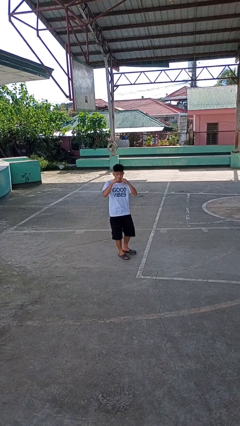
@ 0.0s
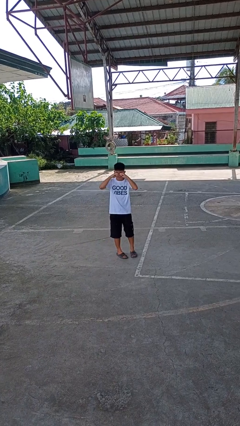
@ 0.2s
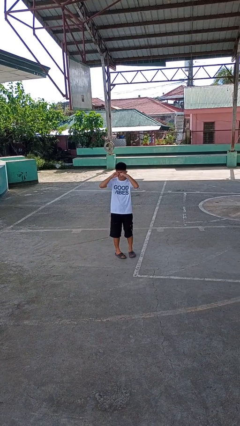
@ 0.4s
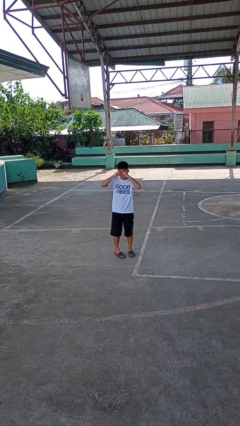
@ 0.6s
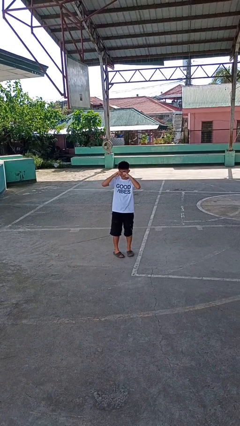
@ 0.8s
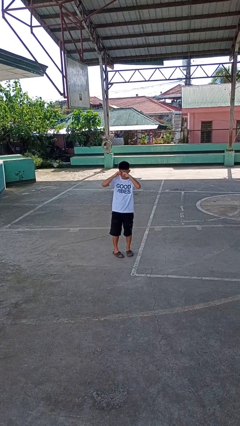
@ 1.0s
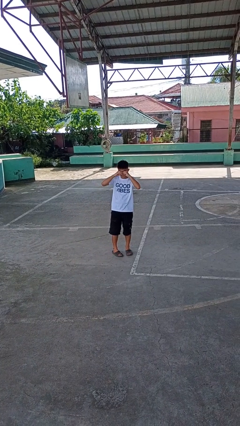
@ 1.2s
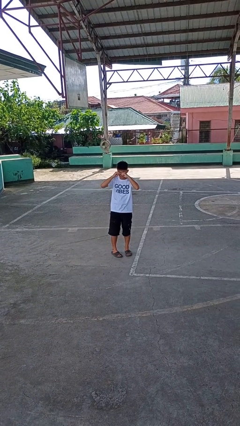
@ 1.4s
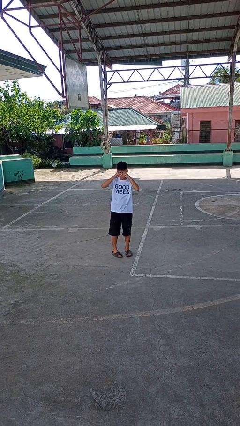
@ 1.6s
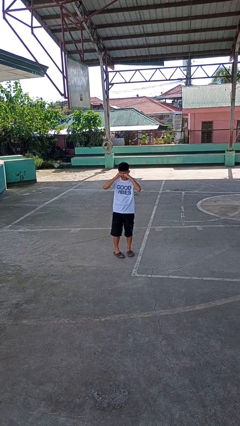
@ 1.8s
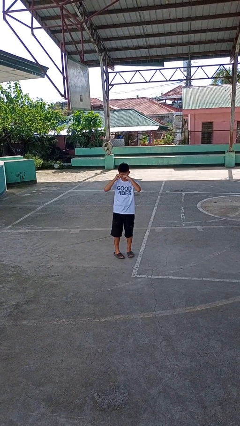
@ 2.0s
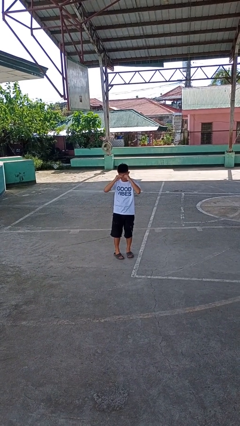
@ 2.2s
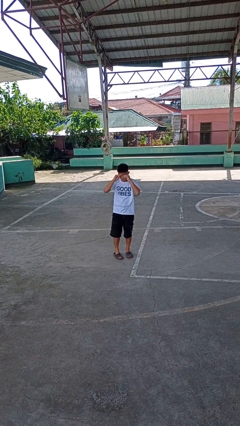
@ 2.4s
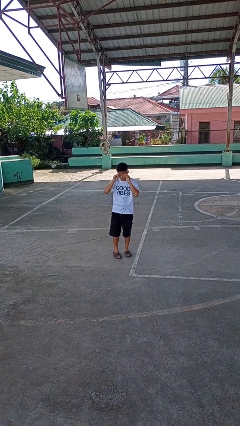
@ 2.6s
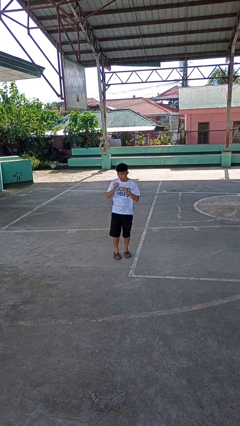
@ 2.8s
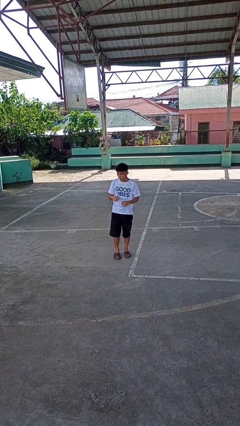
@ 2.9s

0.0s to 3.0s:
person rubs eyes

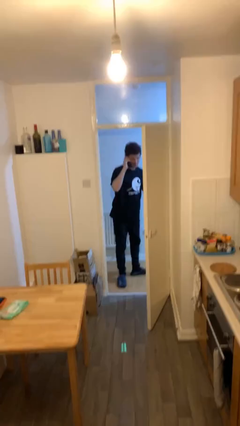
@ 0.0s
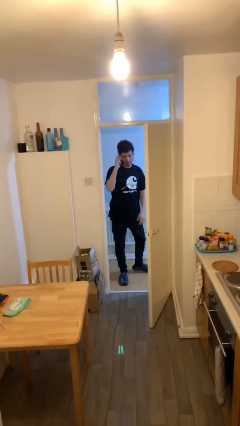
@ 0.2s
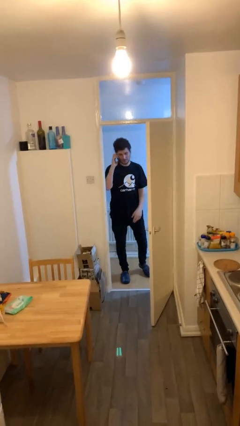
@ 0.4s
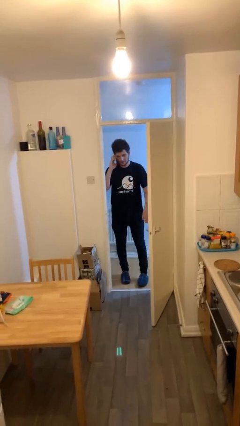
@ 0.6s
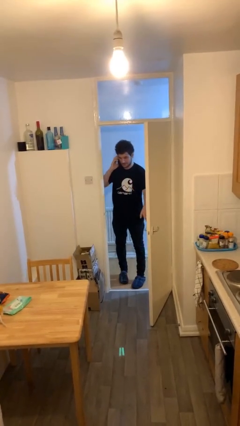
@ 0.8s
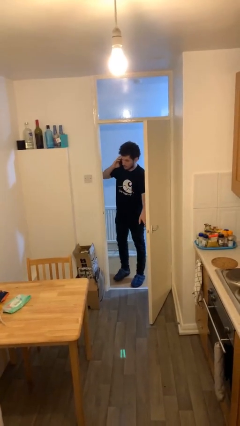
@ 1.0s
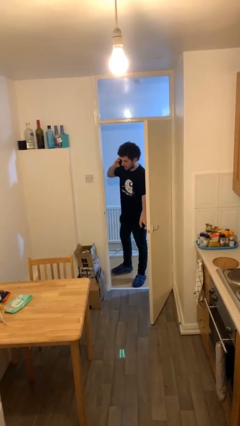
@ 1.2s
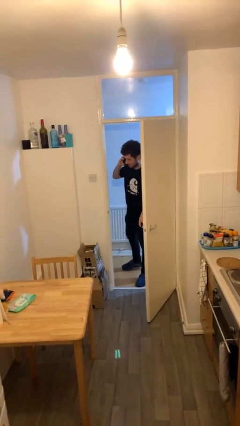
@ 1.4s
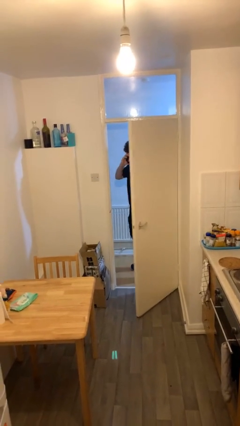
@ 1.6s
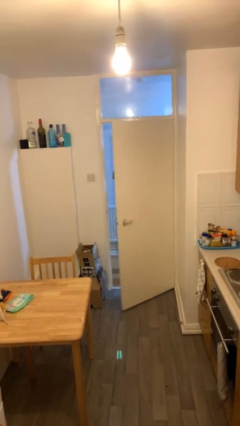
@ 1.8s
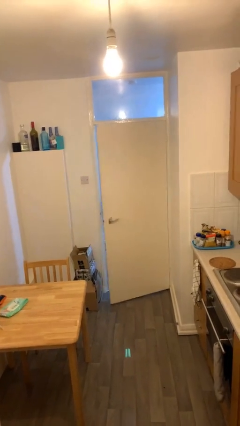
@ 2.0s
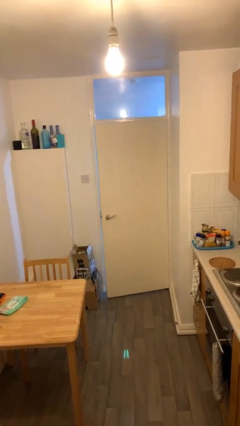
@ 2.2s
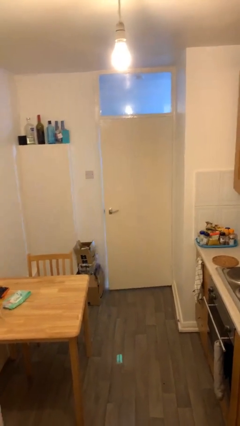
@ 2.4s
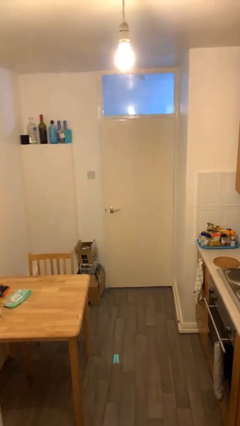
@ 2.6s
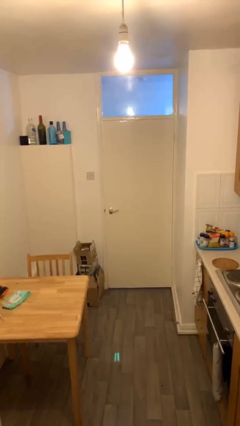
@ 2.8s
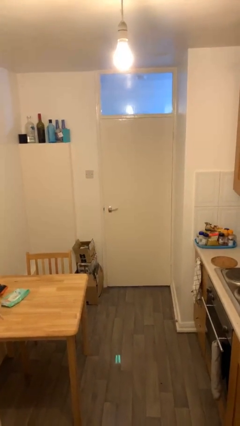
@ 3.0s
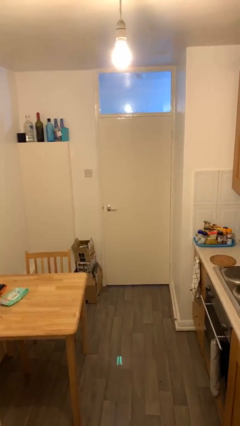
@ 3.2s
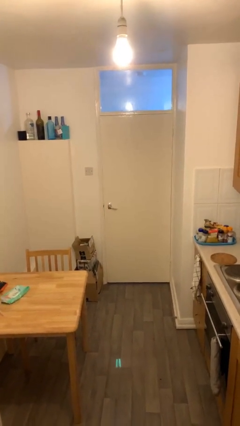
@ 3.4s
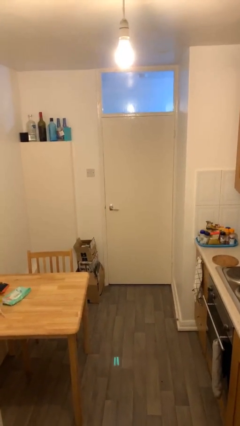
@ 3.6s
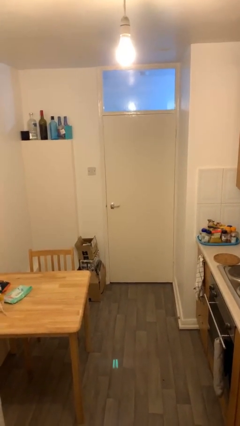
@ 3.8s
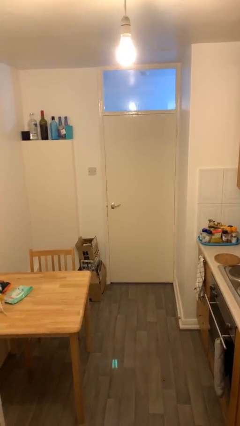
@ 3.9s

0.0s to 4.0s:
person closes facility door

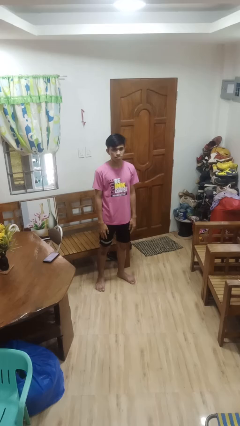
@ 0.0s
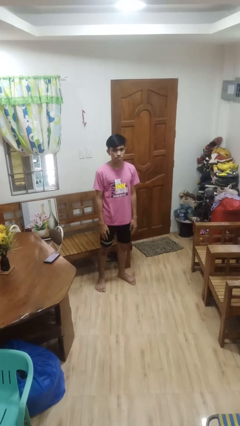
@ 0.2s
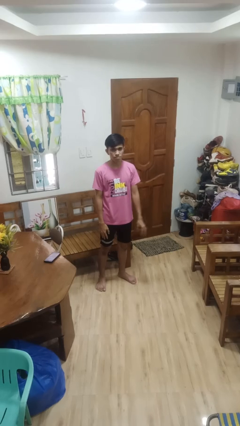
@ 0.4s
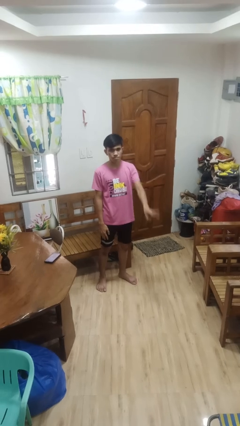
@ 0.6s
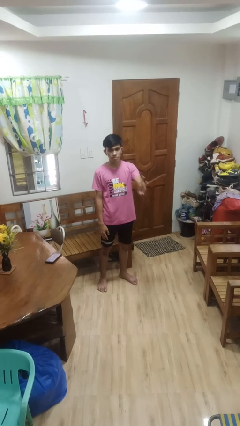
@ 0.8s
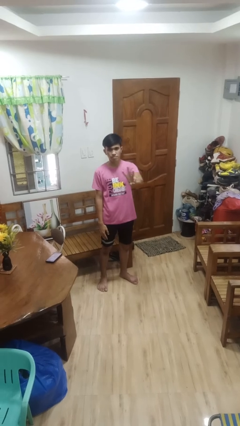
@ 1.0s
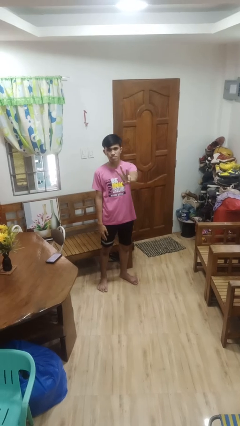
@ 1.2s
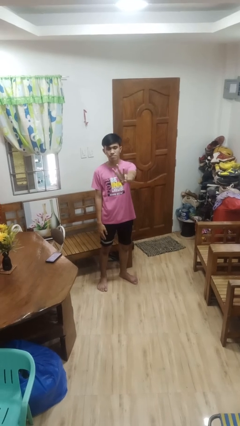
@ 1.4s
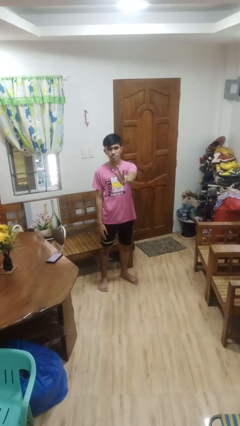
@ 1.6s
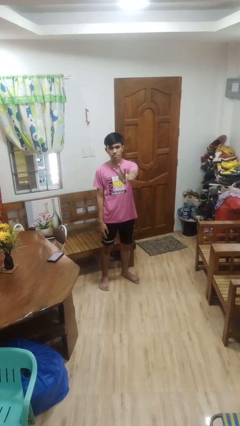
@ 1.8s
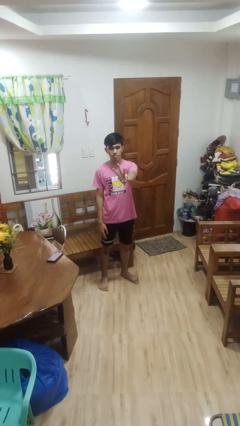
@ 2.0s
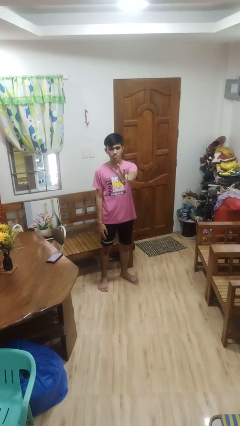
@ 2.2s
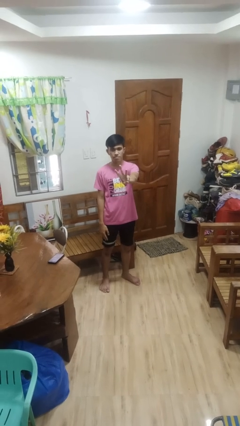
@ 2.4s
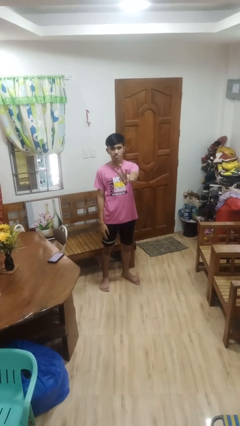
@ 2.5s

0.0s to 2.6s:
person gestures number three

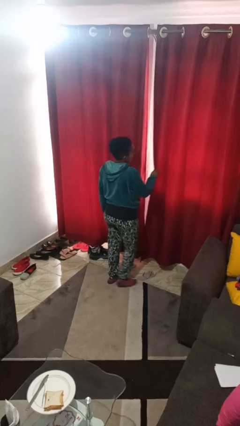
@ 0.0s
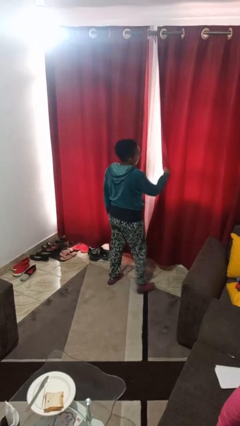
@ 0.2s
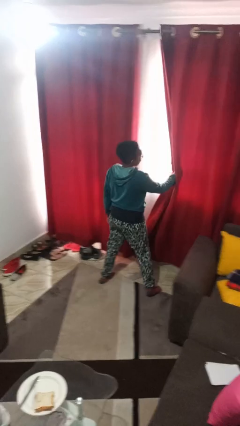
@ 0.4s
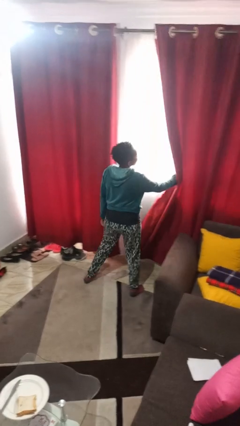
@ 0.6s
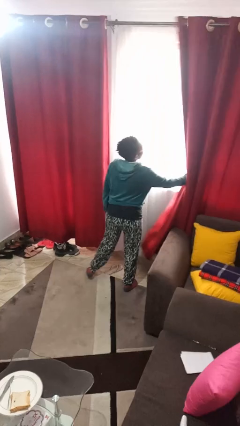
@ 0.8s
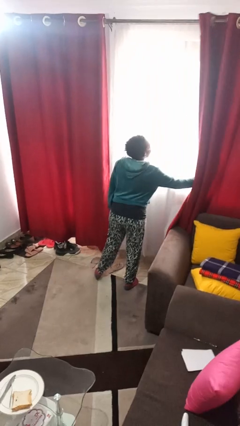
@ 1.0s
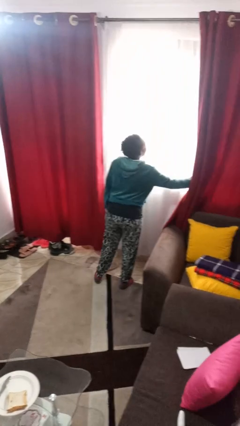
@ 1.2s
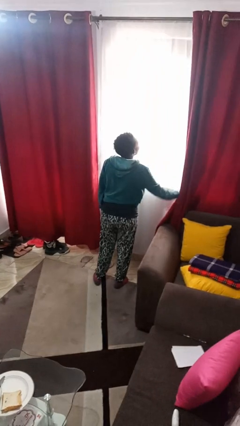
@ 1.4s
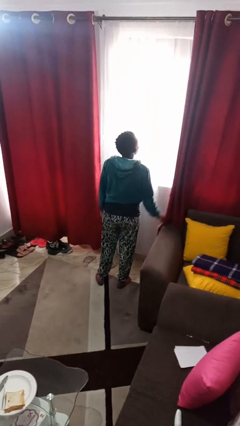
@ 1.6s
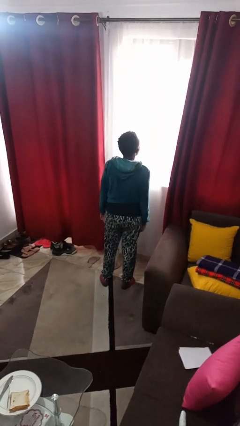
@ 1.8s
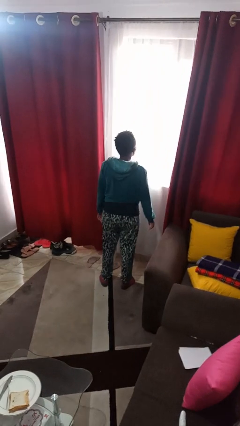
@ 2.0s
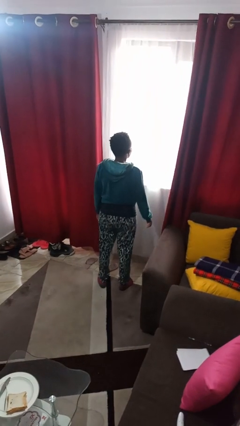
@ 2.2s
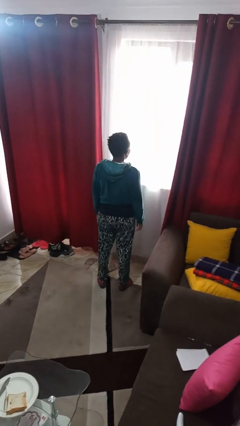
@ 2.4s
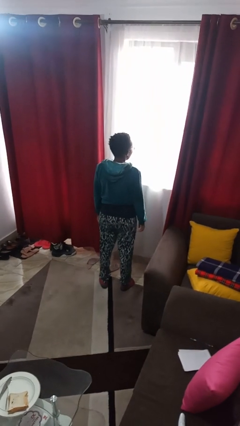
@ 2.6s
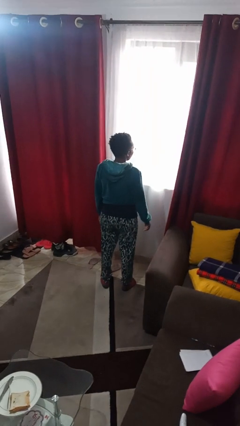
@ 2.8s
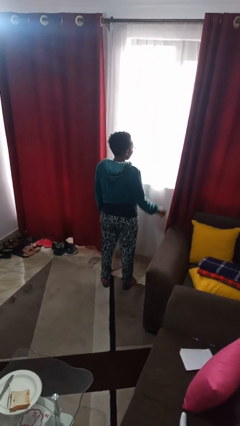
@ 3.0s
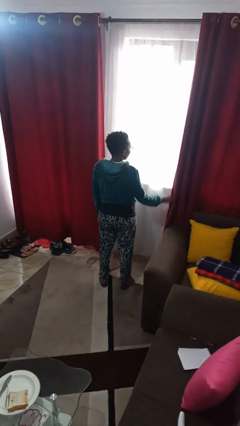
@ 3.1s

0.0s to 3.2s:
person opens curtains

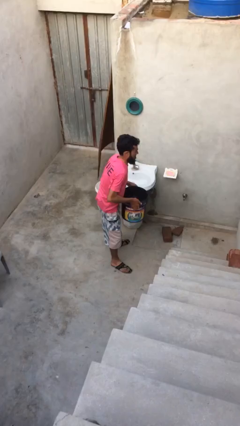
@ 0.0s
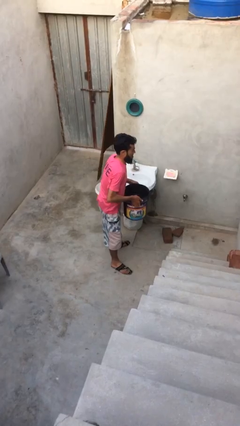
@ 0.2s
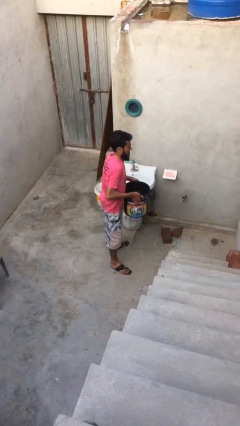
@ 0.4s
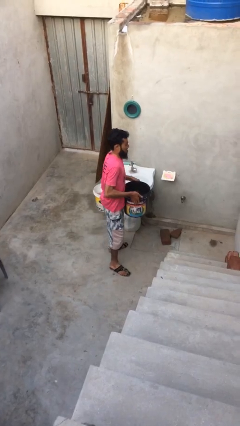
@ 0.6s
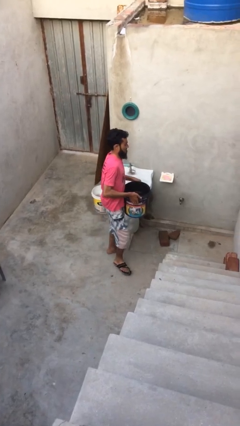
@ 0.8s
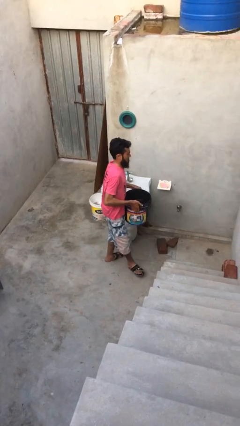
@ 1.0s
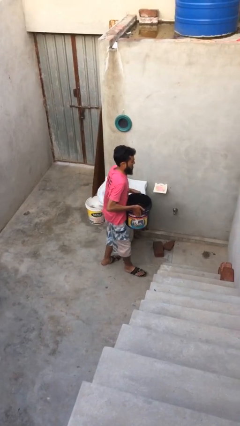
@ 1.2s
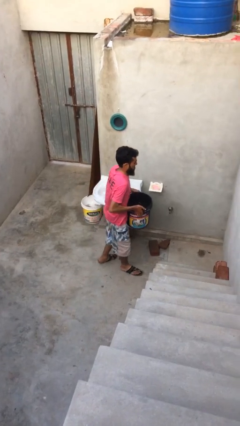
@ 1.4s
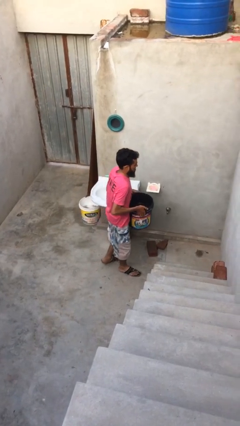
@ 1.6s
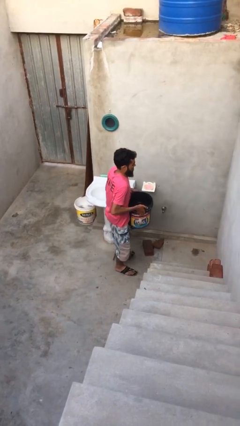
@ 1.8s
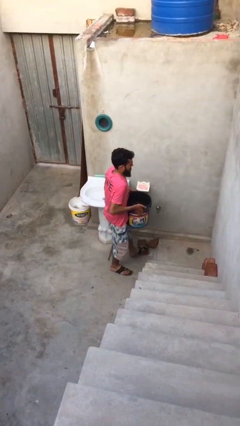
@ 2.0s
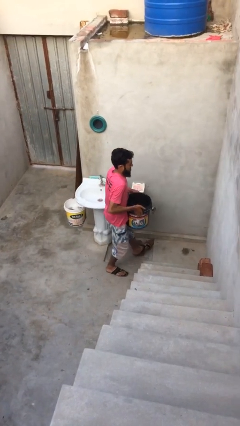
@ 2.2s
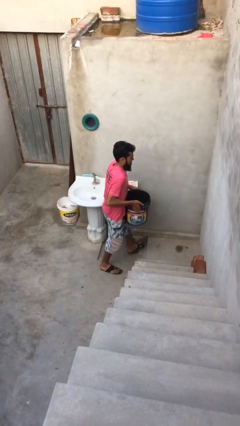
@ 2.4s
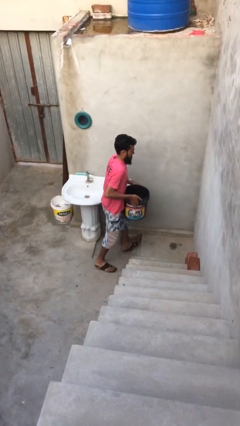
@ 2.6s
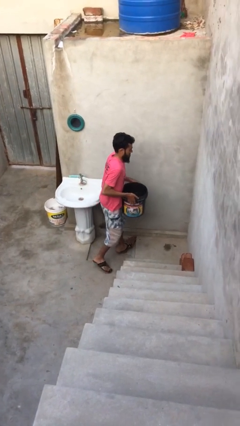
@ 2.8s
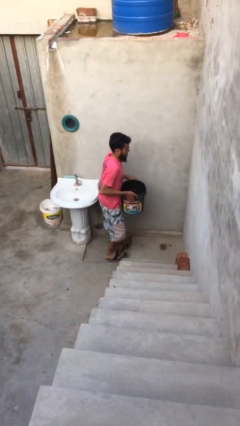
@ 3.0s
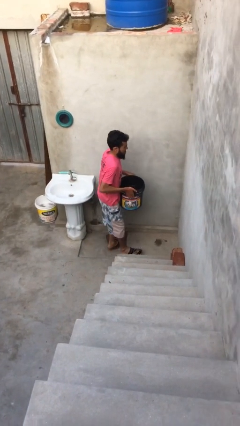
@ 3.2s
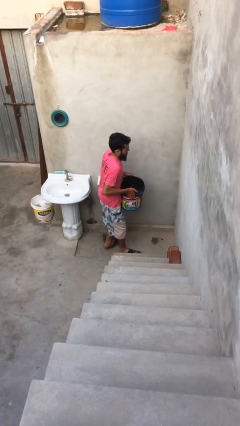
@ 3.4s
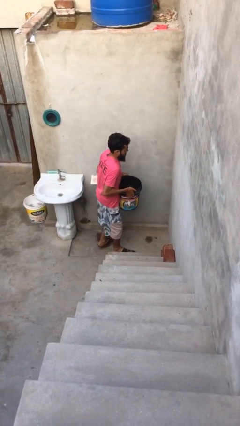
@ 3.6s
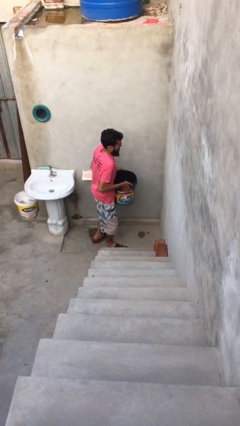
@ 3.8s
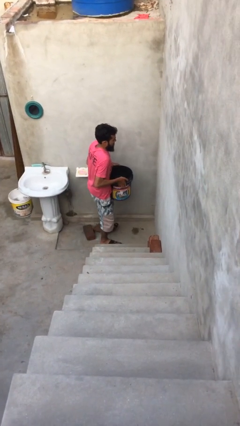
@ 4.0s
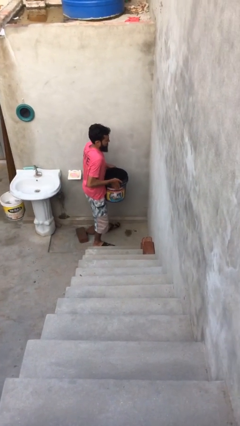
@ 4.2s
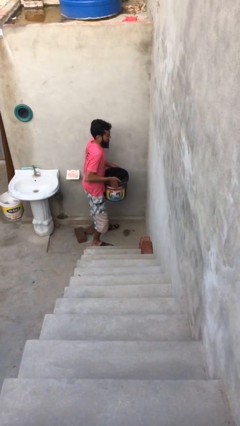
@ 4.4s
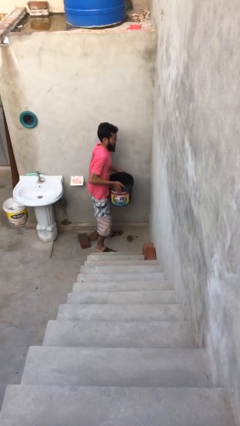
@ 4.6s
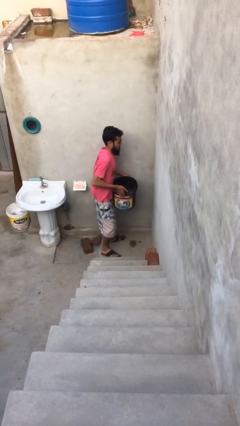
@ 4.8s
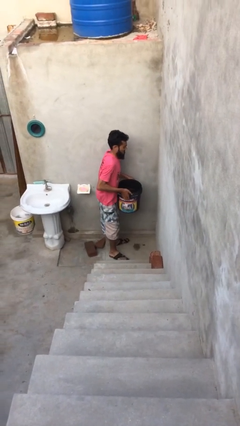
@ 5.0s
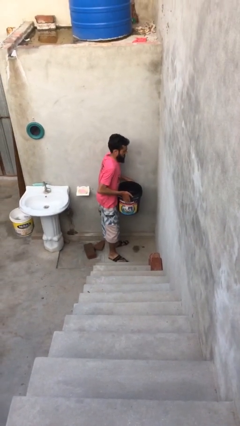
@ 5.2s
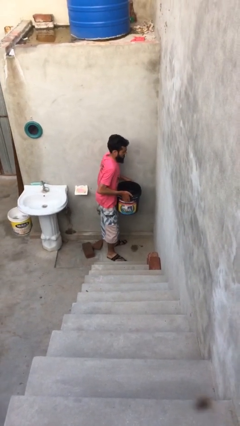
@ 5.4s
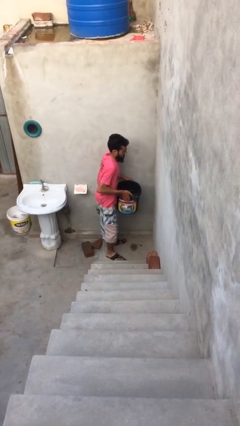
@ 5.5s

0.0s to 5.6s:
person carries heavy object
